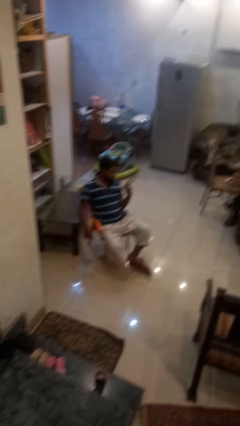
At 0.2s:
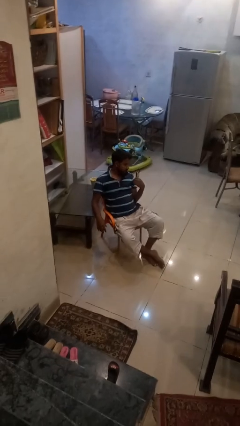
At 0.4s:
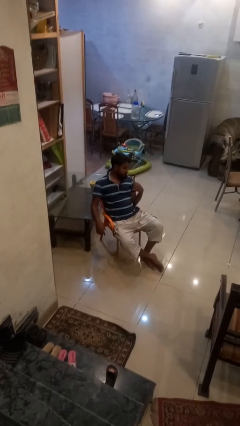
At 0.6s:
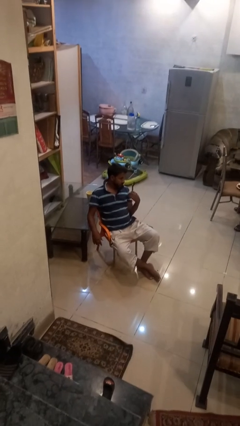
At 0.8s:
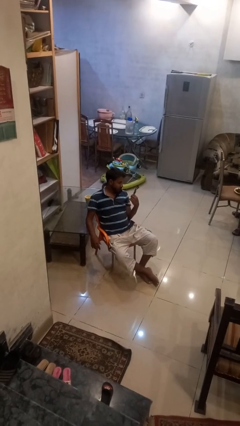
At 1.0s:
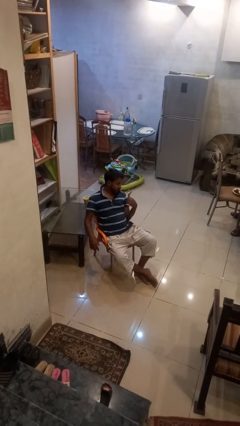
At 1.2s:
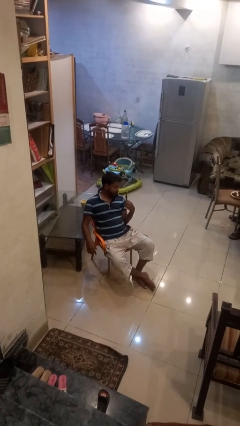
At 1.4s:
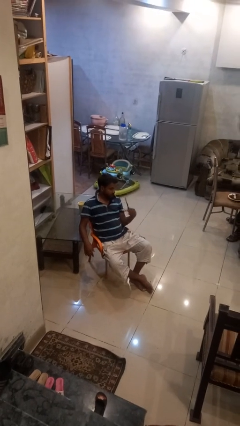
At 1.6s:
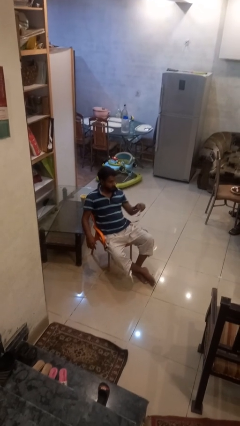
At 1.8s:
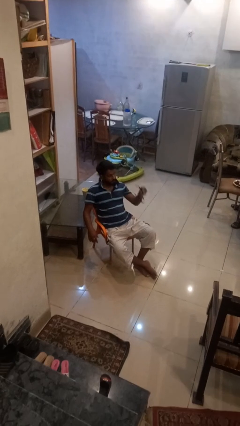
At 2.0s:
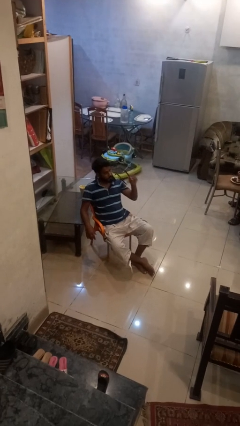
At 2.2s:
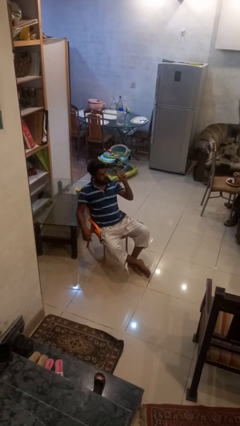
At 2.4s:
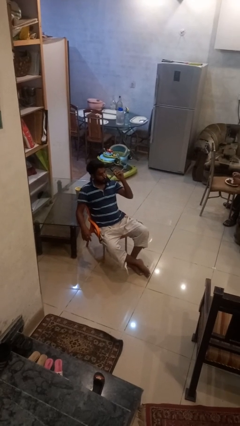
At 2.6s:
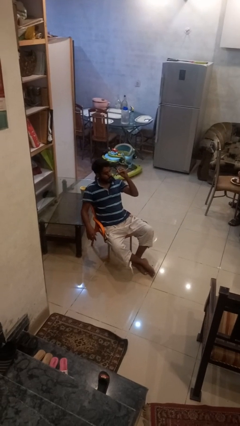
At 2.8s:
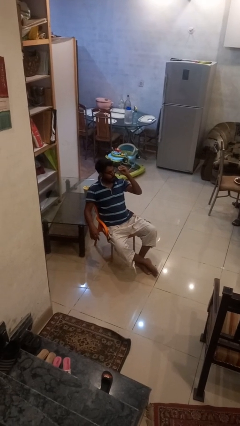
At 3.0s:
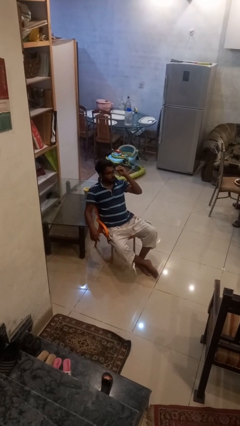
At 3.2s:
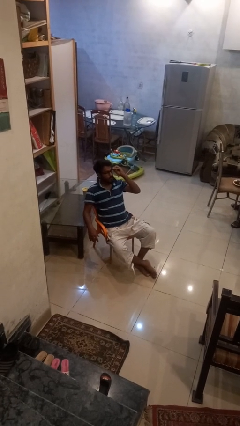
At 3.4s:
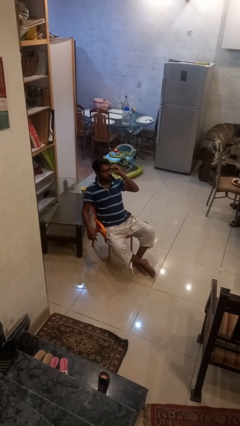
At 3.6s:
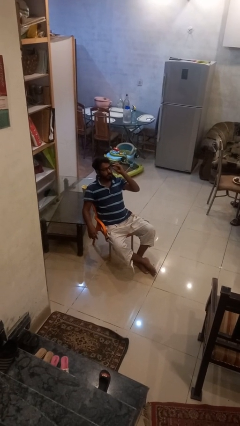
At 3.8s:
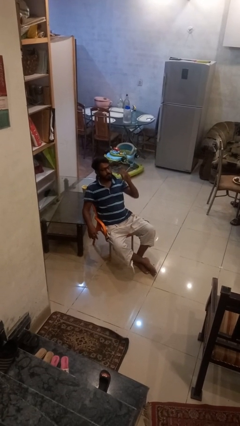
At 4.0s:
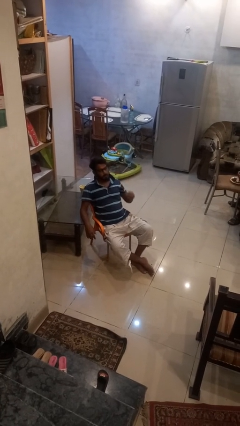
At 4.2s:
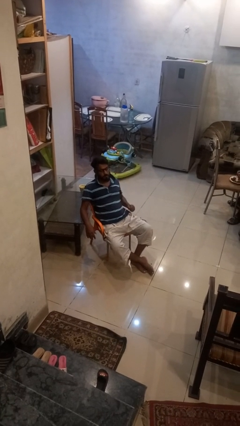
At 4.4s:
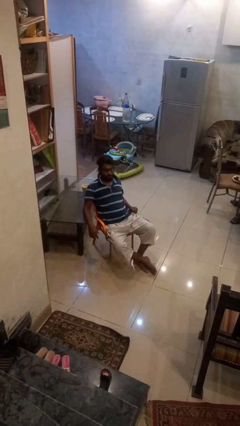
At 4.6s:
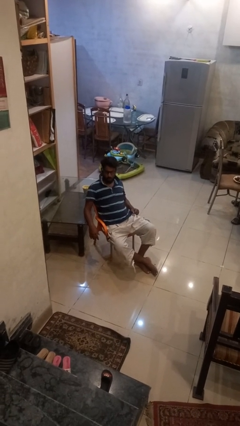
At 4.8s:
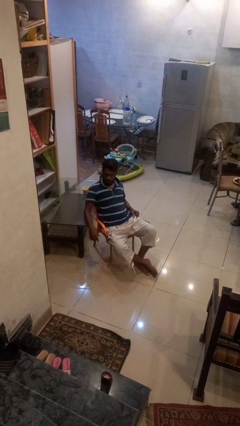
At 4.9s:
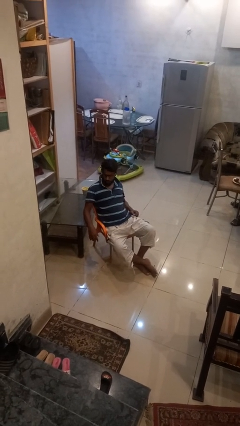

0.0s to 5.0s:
person puts on glasses

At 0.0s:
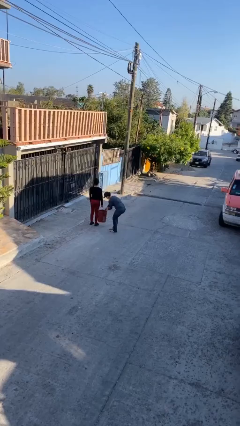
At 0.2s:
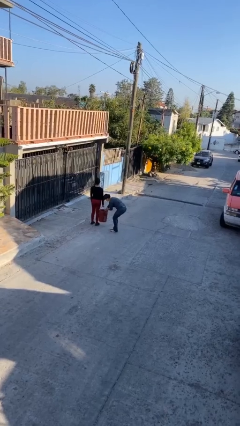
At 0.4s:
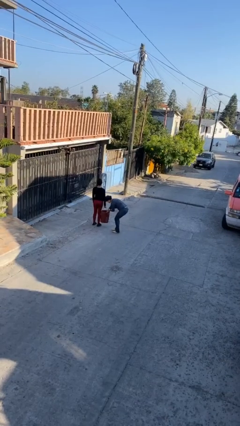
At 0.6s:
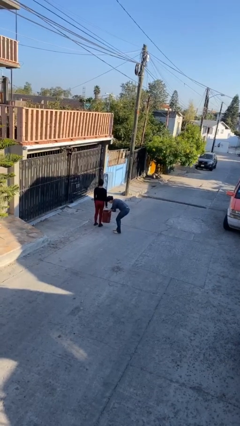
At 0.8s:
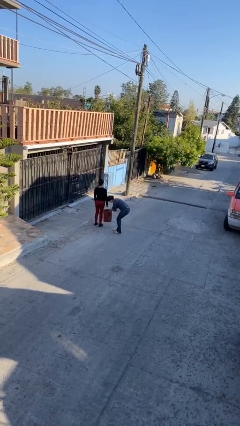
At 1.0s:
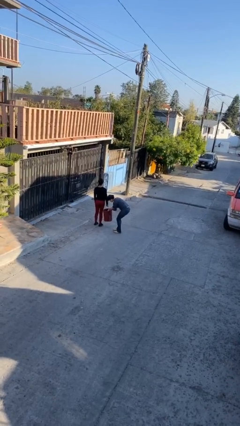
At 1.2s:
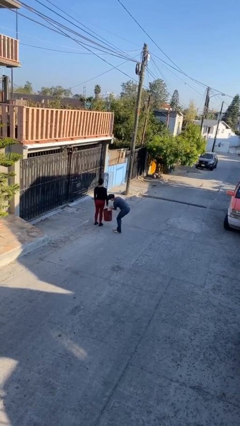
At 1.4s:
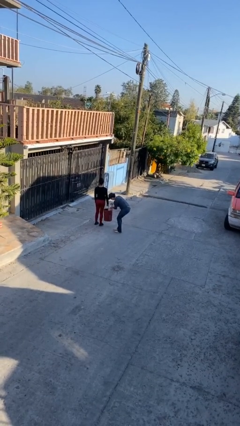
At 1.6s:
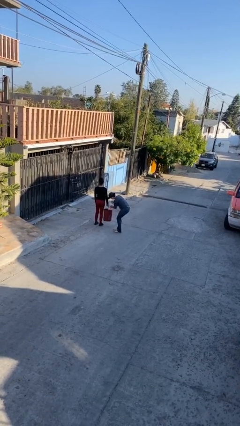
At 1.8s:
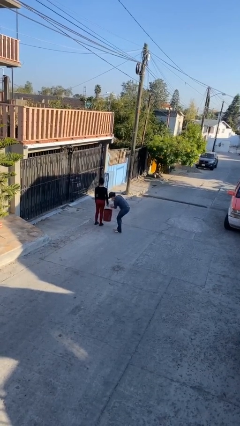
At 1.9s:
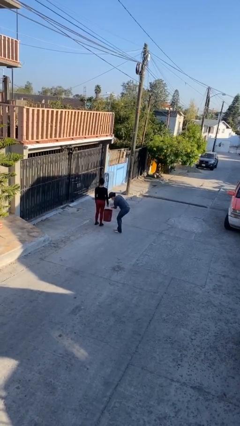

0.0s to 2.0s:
person steals object from person

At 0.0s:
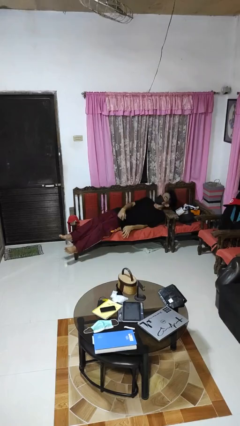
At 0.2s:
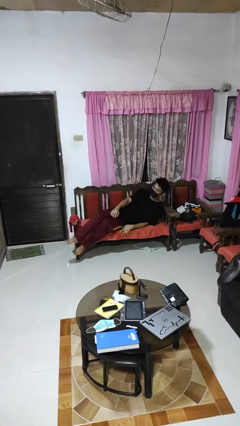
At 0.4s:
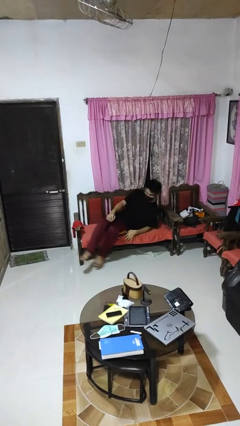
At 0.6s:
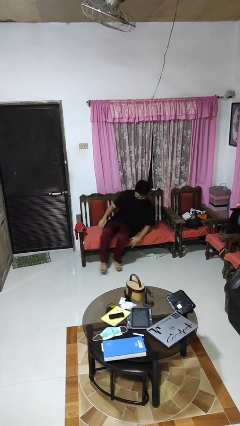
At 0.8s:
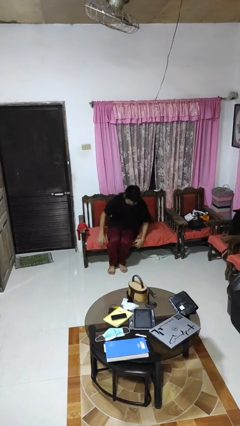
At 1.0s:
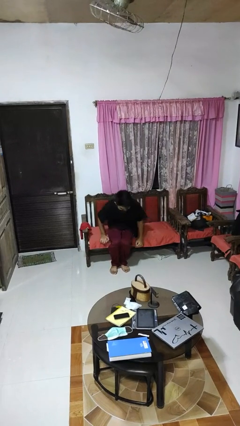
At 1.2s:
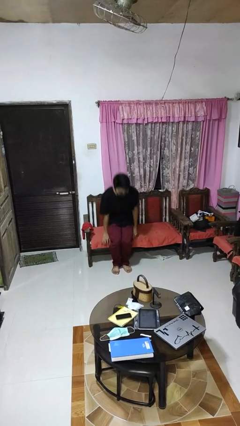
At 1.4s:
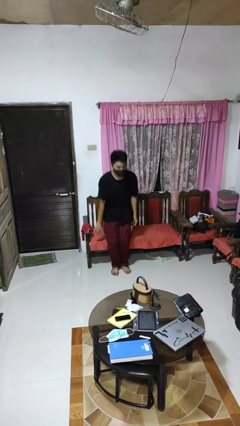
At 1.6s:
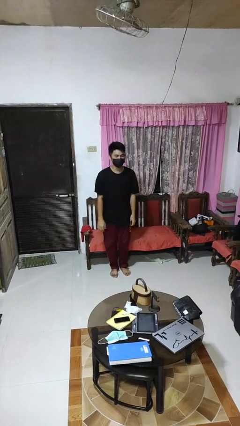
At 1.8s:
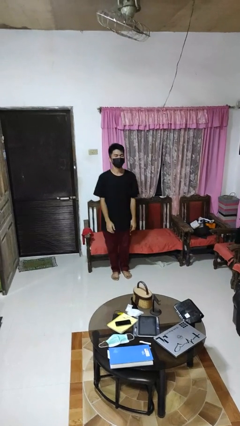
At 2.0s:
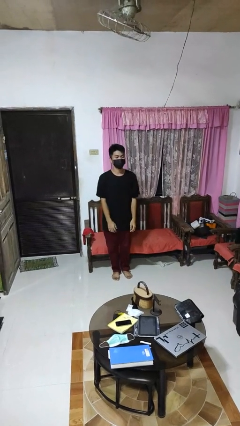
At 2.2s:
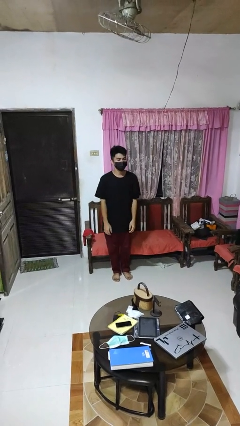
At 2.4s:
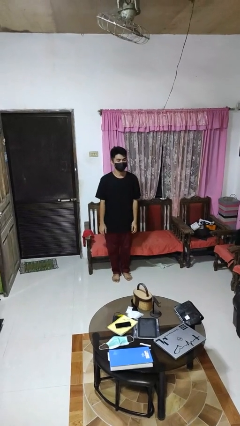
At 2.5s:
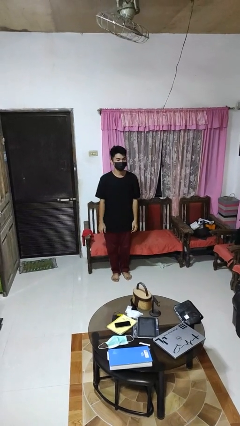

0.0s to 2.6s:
person stands up

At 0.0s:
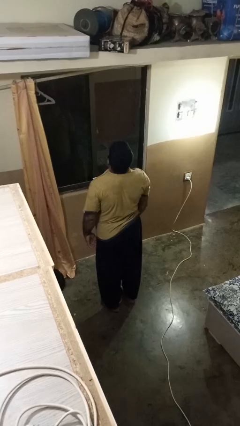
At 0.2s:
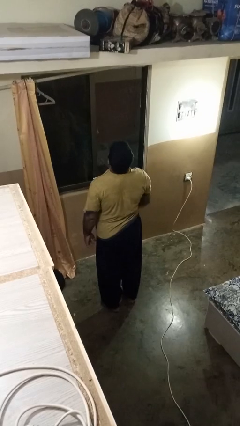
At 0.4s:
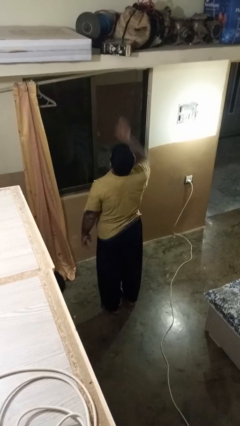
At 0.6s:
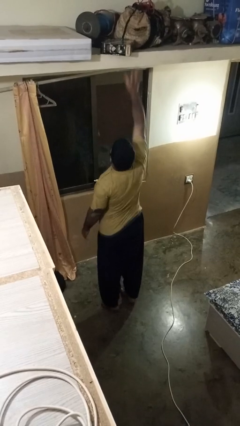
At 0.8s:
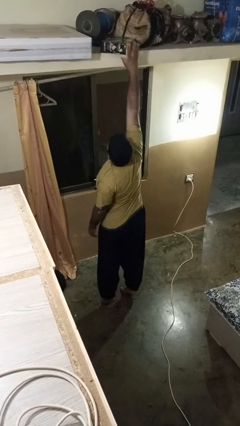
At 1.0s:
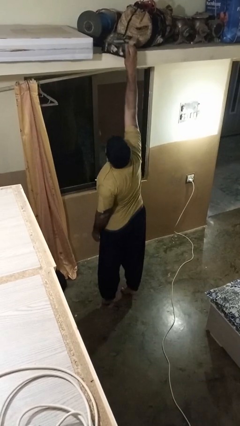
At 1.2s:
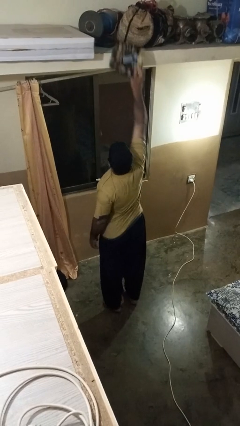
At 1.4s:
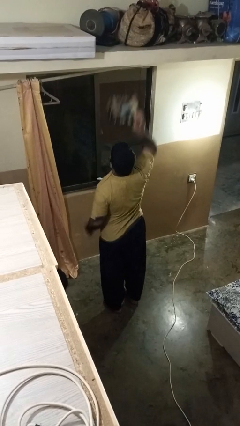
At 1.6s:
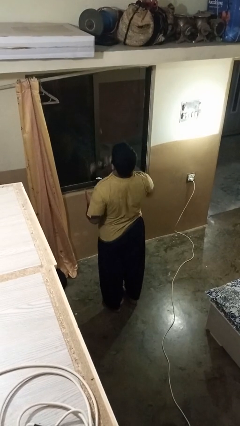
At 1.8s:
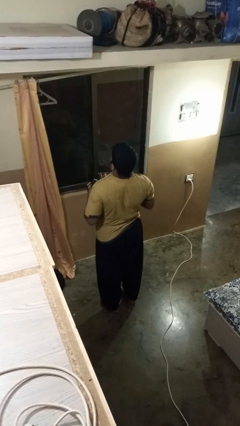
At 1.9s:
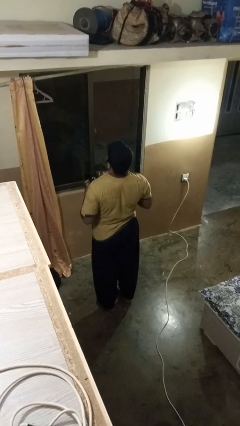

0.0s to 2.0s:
person picks up object from shelf

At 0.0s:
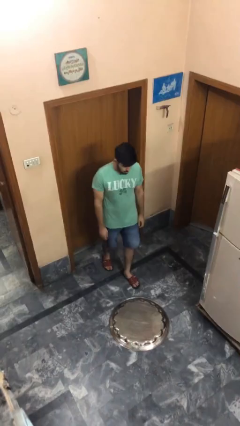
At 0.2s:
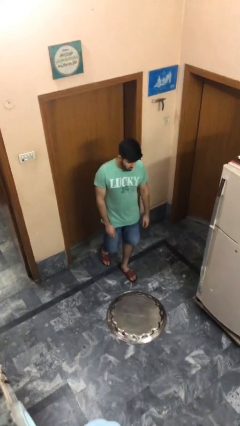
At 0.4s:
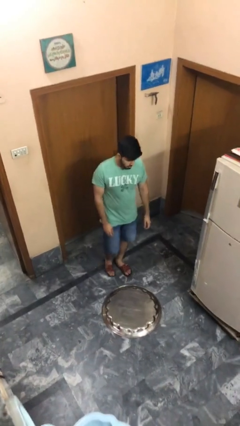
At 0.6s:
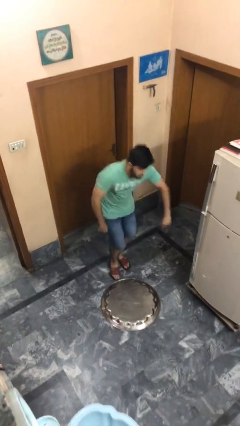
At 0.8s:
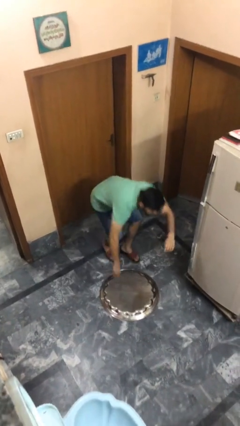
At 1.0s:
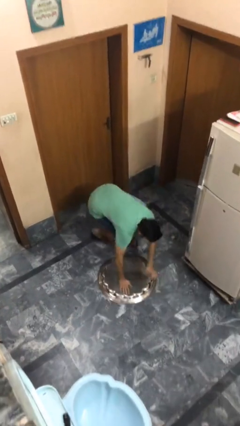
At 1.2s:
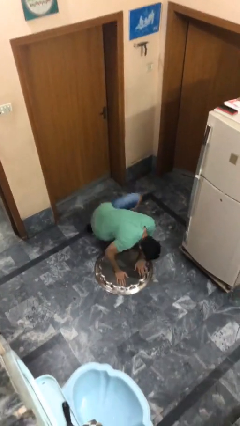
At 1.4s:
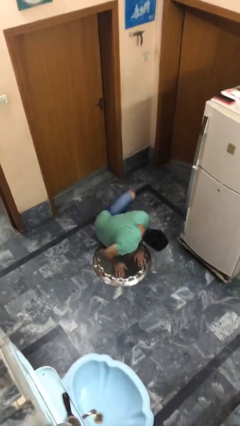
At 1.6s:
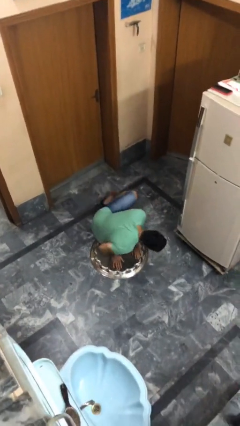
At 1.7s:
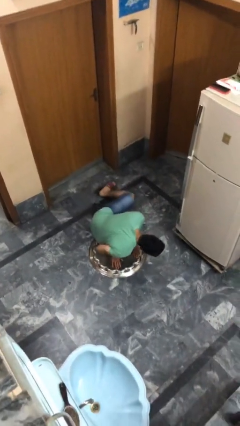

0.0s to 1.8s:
person trips on object on floor

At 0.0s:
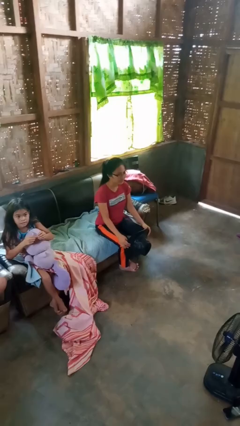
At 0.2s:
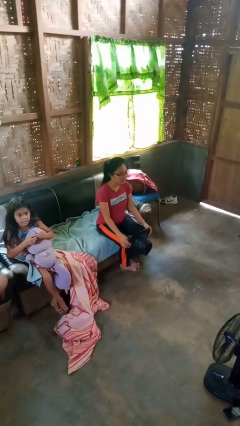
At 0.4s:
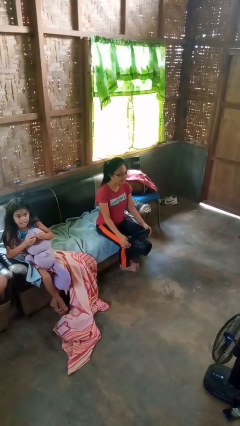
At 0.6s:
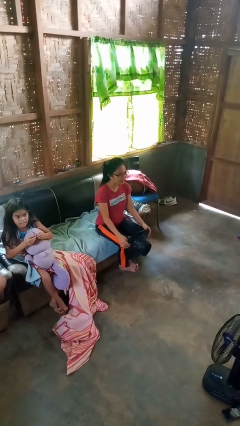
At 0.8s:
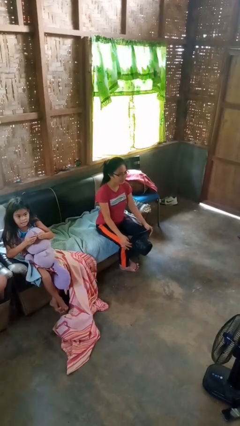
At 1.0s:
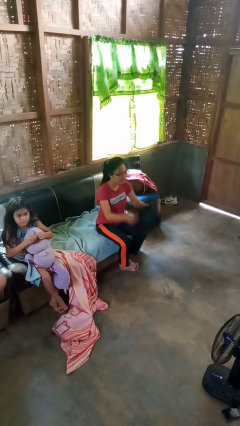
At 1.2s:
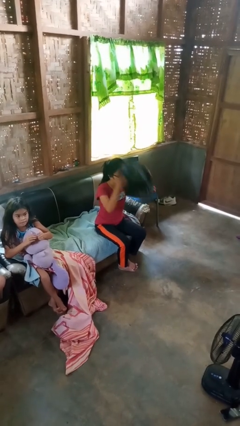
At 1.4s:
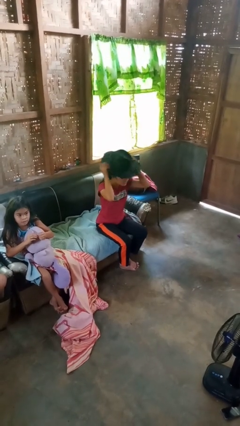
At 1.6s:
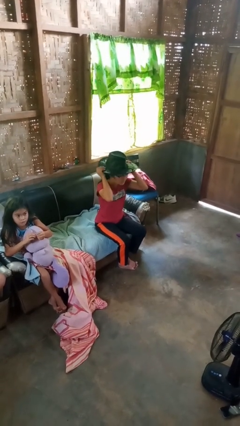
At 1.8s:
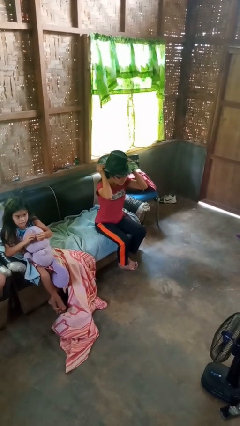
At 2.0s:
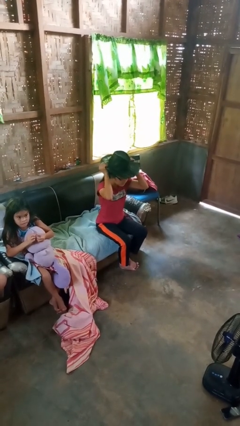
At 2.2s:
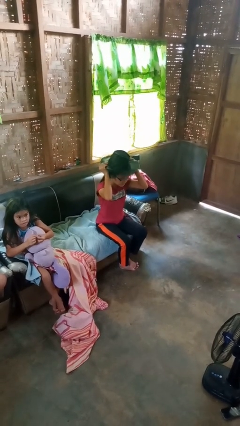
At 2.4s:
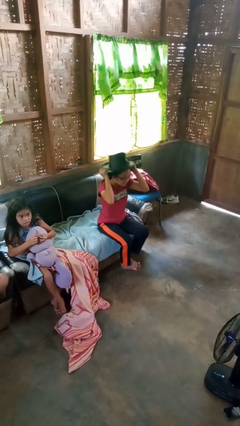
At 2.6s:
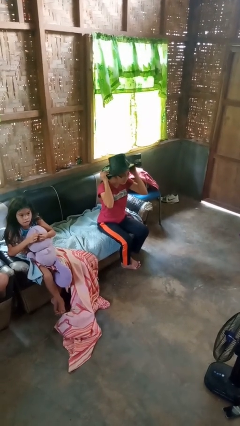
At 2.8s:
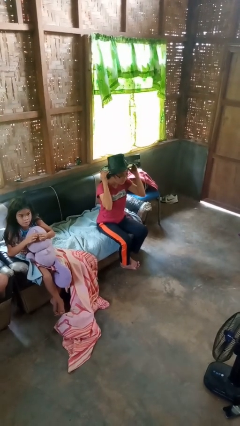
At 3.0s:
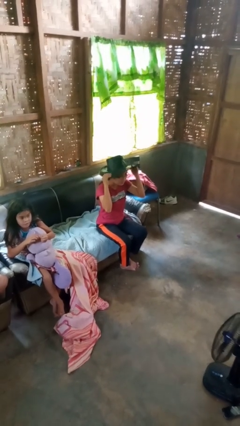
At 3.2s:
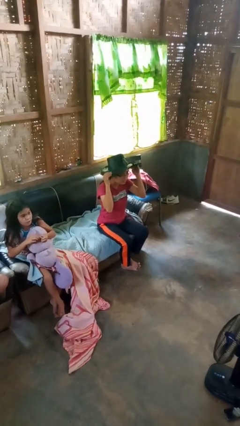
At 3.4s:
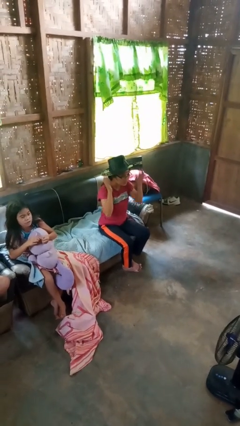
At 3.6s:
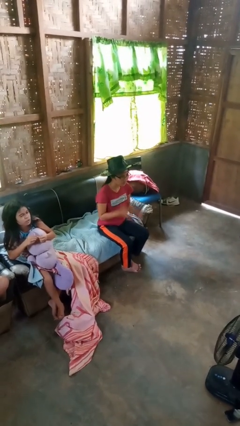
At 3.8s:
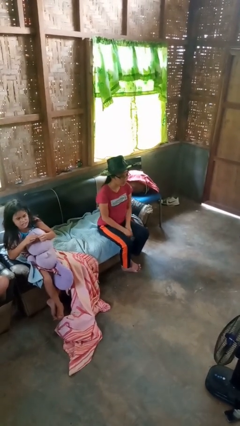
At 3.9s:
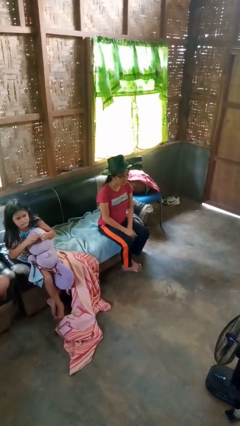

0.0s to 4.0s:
person puts on hat

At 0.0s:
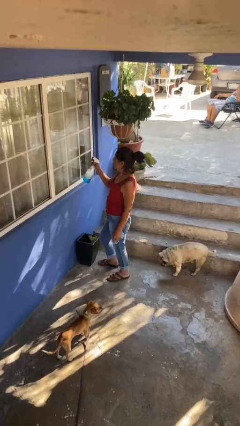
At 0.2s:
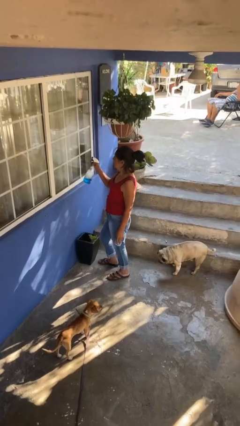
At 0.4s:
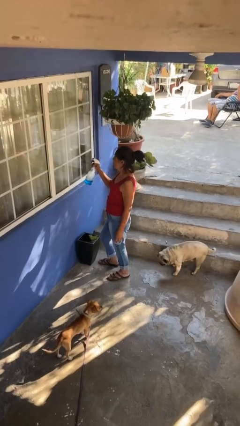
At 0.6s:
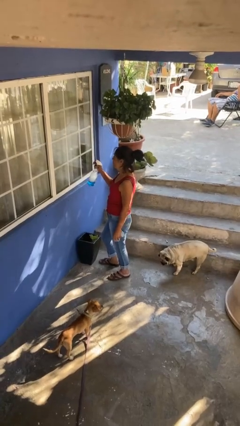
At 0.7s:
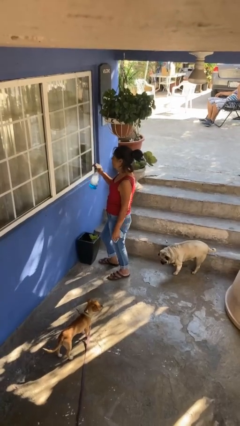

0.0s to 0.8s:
person sprays from bottle
